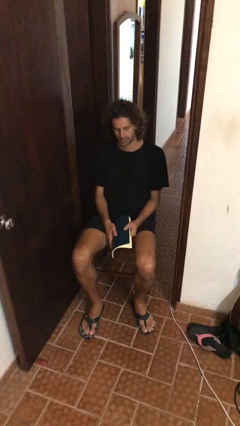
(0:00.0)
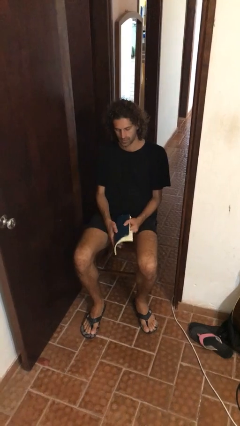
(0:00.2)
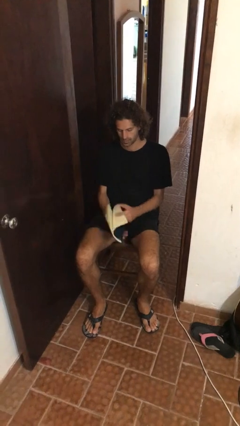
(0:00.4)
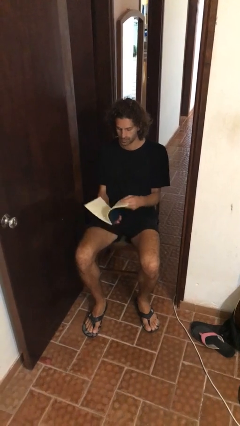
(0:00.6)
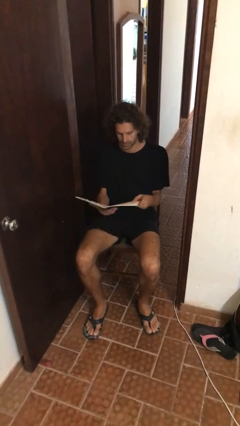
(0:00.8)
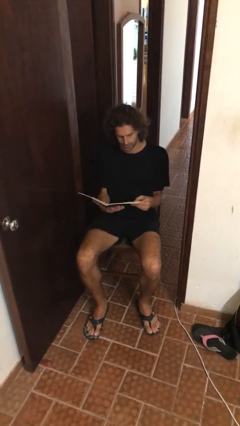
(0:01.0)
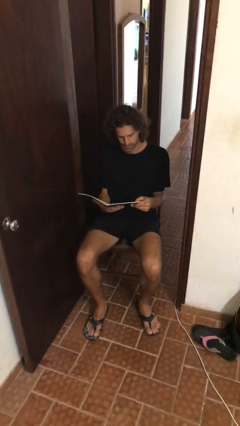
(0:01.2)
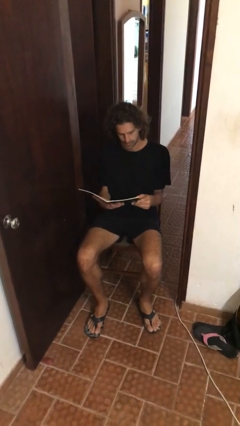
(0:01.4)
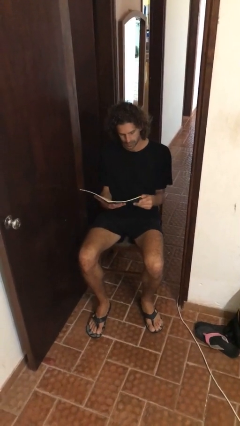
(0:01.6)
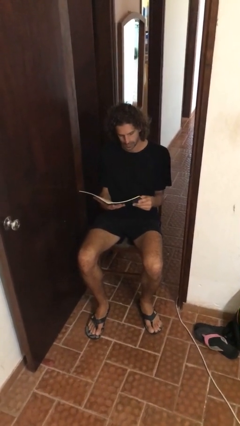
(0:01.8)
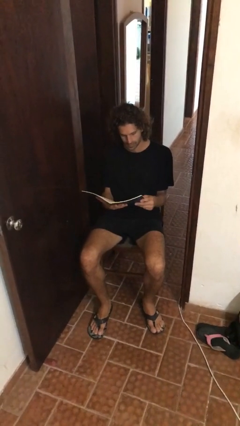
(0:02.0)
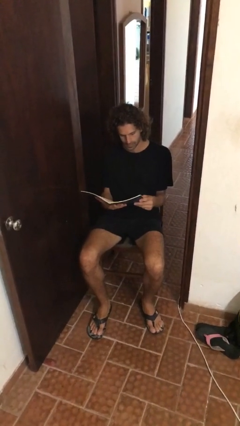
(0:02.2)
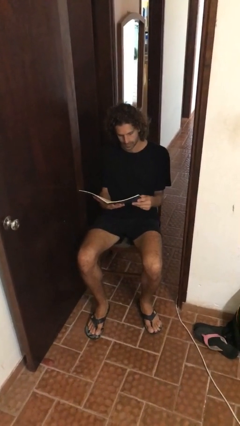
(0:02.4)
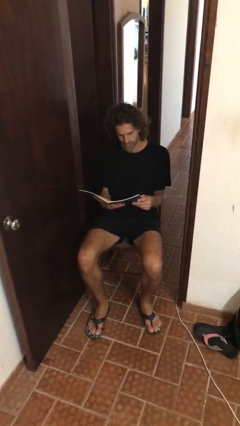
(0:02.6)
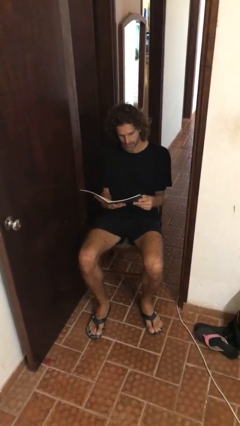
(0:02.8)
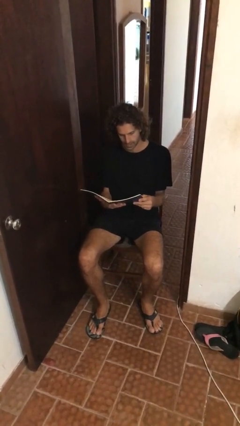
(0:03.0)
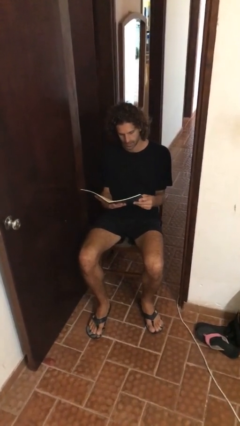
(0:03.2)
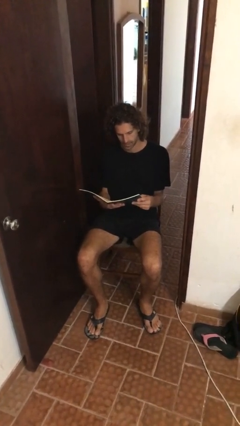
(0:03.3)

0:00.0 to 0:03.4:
person reads document

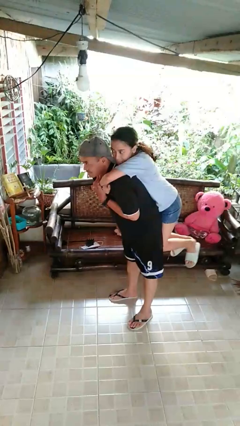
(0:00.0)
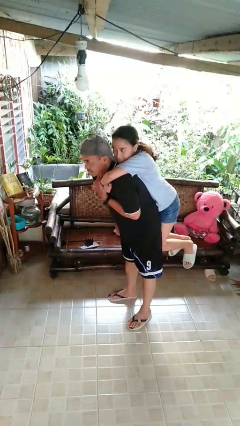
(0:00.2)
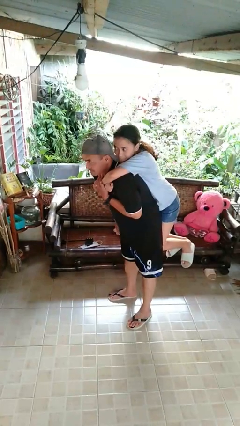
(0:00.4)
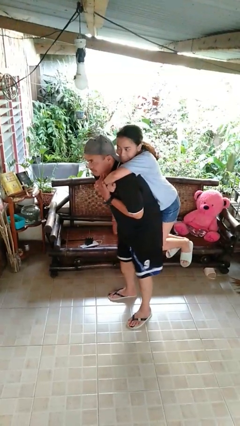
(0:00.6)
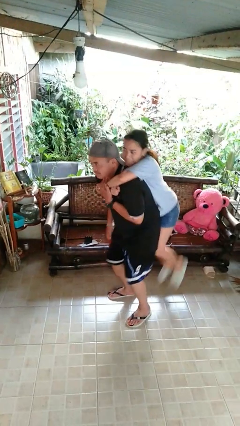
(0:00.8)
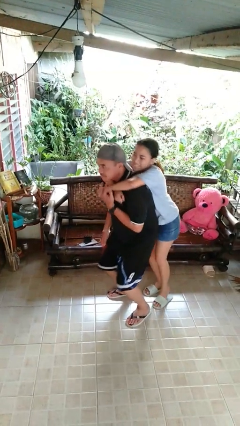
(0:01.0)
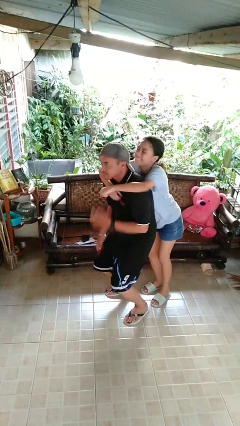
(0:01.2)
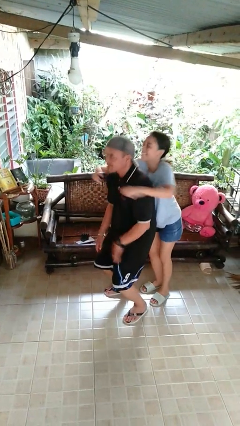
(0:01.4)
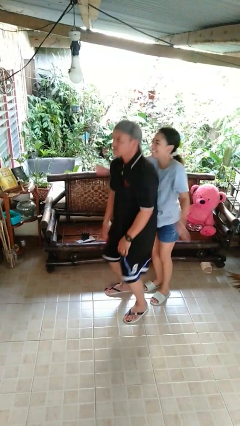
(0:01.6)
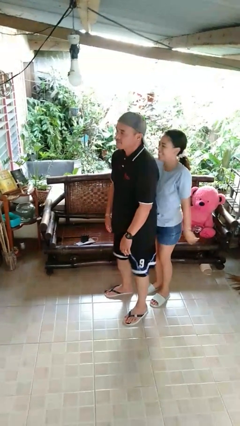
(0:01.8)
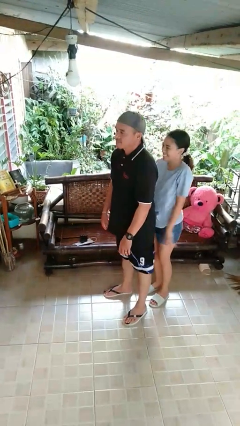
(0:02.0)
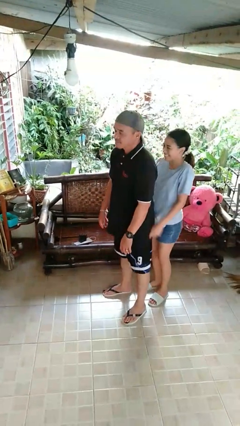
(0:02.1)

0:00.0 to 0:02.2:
person puts down person

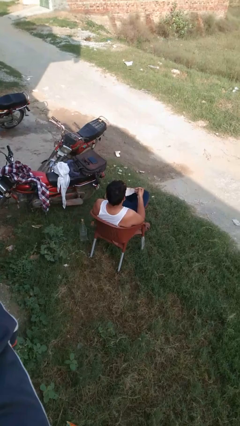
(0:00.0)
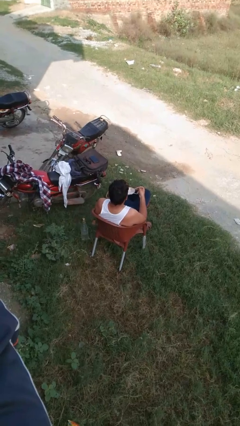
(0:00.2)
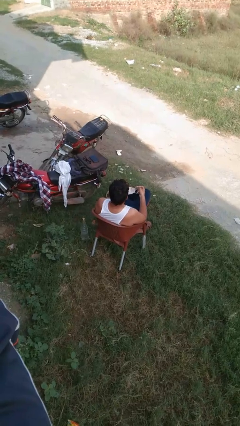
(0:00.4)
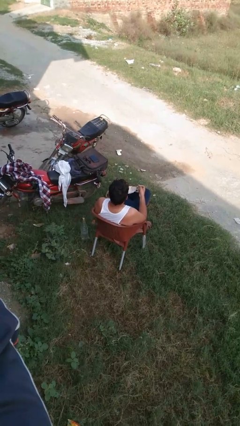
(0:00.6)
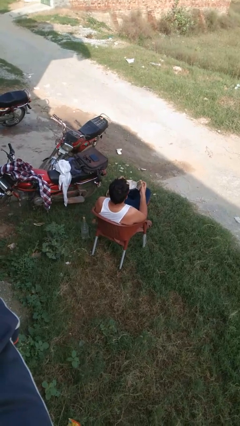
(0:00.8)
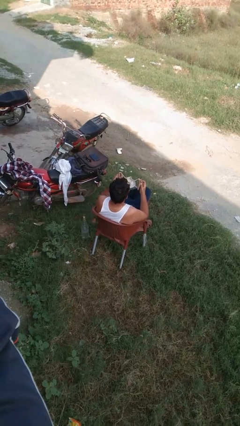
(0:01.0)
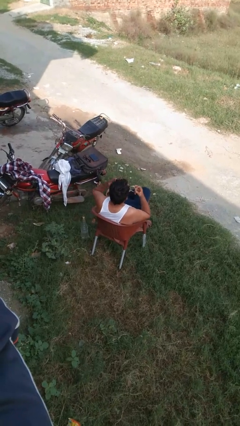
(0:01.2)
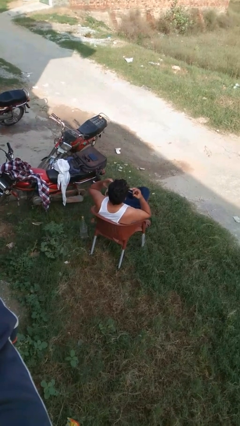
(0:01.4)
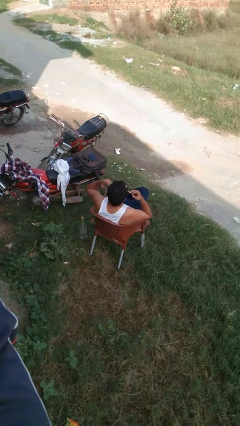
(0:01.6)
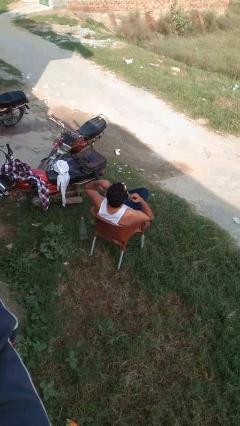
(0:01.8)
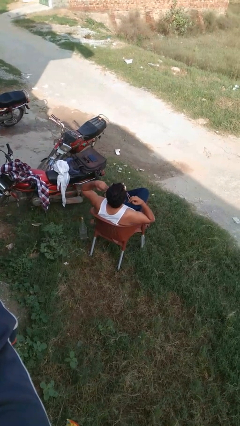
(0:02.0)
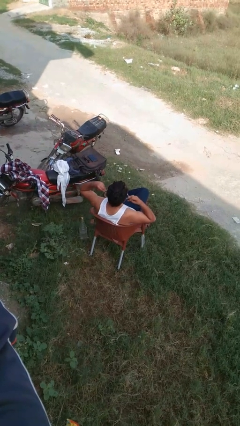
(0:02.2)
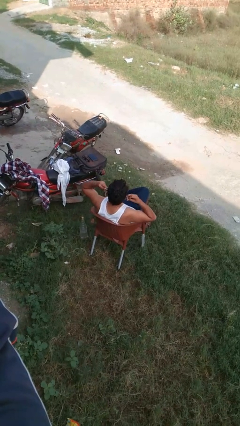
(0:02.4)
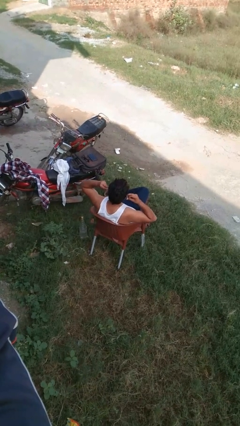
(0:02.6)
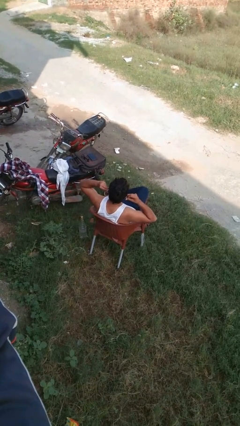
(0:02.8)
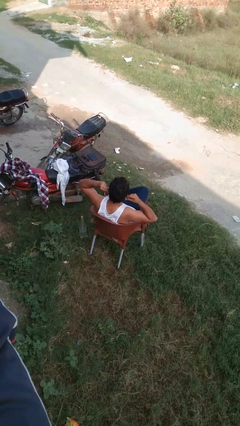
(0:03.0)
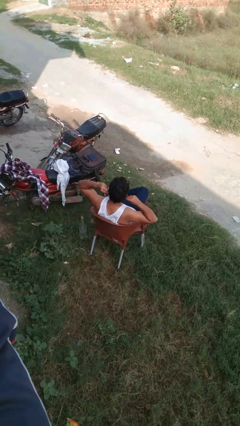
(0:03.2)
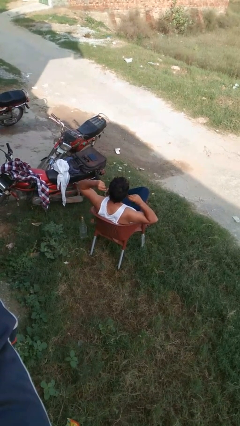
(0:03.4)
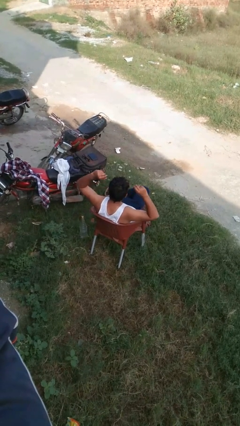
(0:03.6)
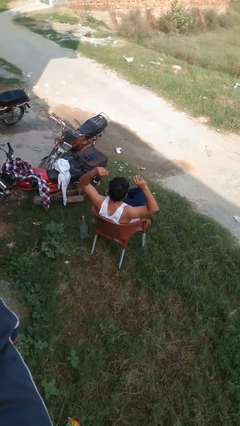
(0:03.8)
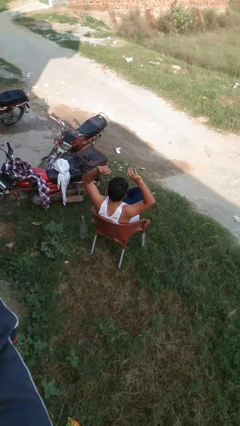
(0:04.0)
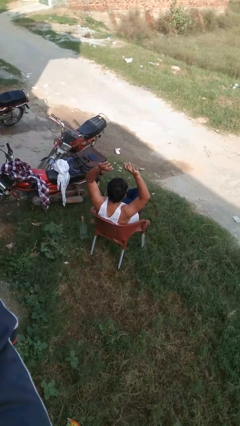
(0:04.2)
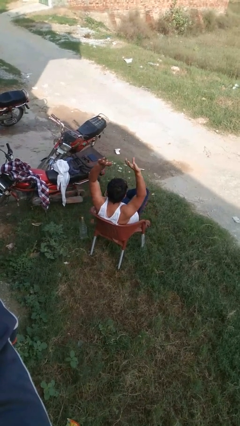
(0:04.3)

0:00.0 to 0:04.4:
person puts on facemask

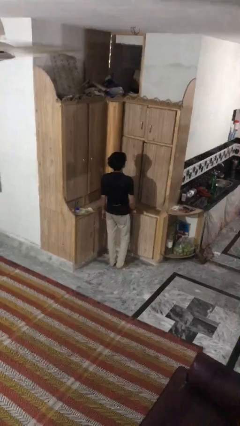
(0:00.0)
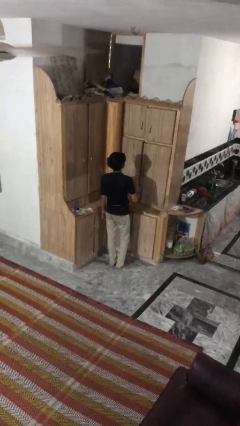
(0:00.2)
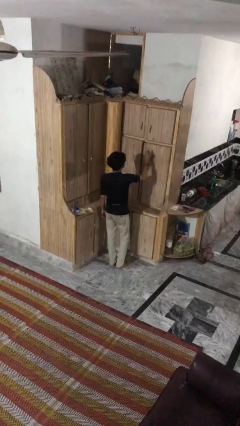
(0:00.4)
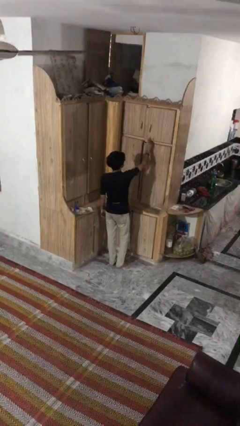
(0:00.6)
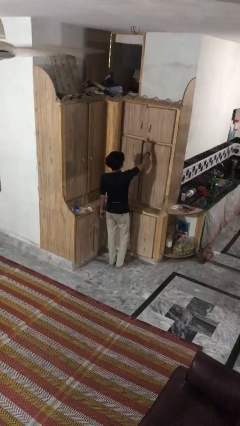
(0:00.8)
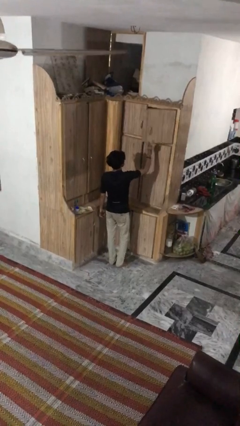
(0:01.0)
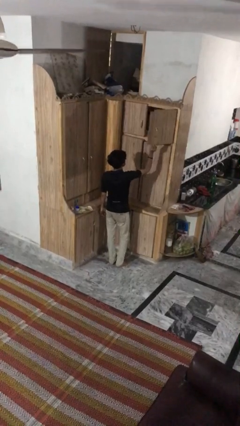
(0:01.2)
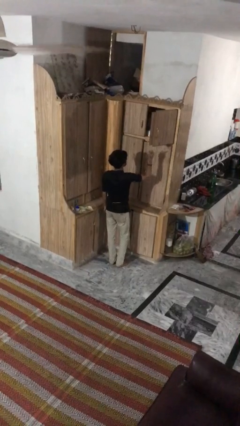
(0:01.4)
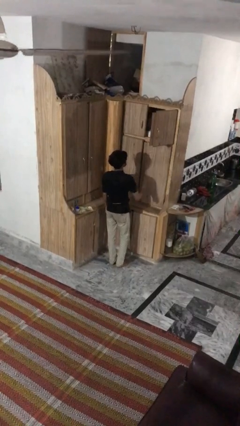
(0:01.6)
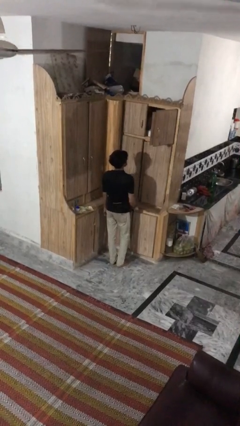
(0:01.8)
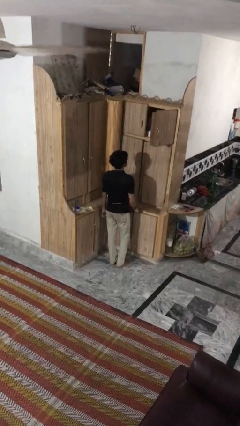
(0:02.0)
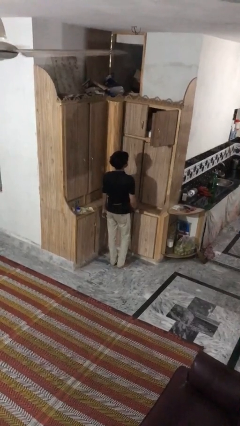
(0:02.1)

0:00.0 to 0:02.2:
person opens cabinet

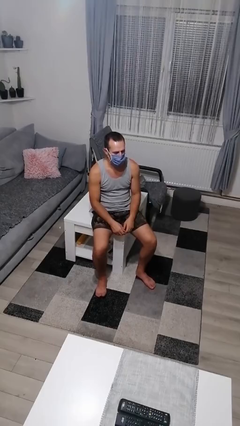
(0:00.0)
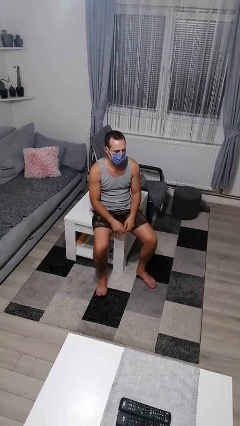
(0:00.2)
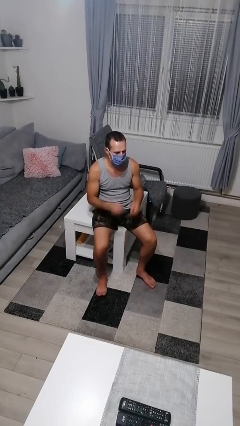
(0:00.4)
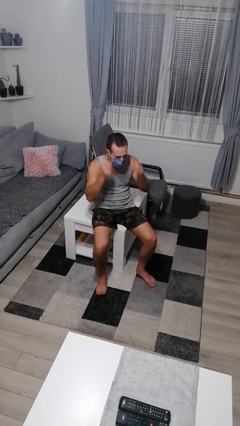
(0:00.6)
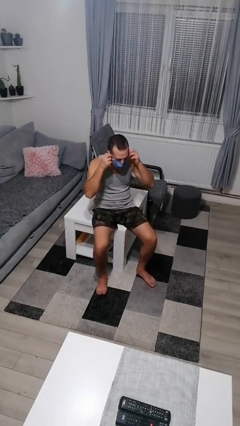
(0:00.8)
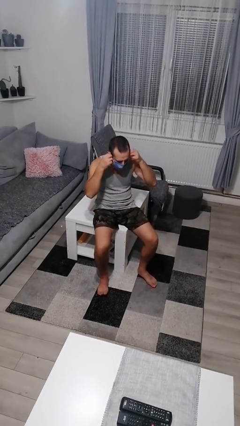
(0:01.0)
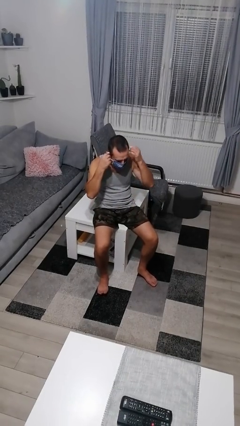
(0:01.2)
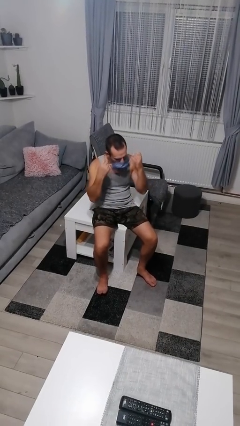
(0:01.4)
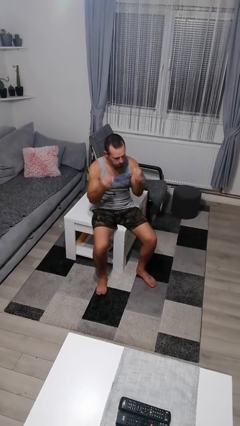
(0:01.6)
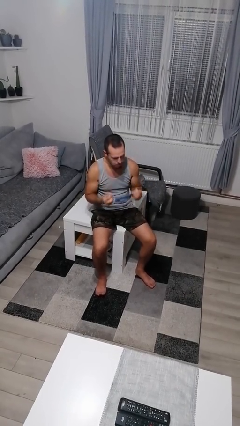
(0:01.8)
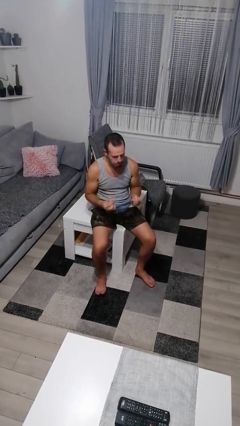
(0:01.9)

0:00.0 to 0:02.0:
person takes off facemask

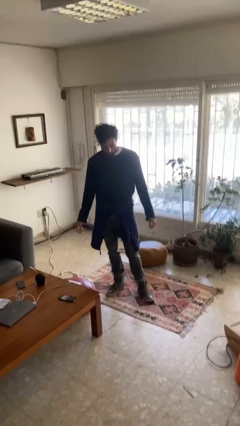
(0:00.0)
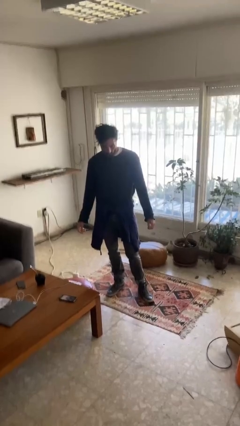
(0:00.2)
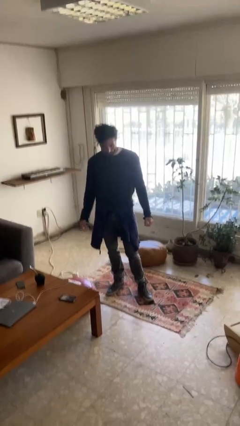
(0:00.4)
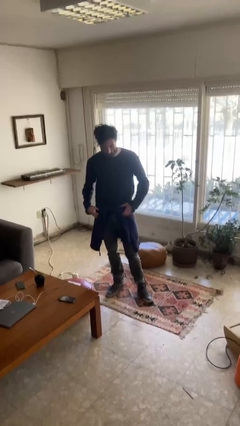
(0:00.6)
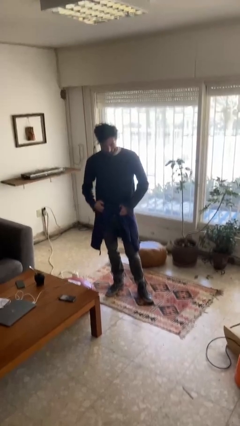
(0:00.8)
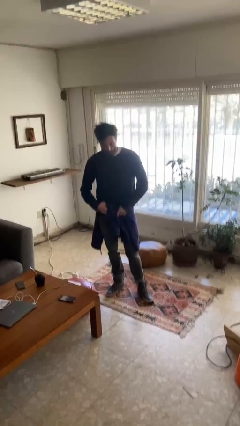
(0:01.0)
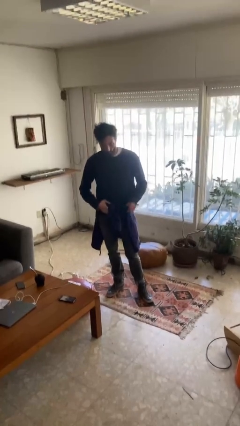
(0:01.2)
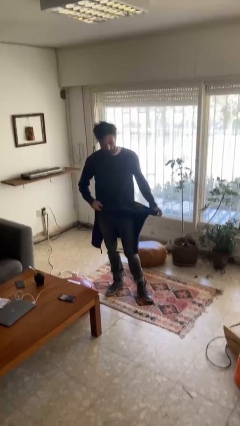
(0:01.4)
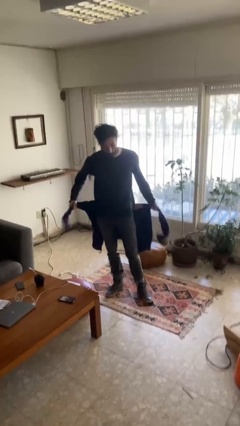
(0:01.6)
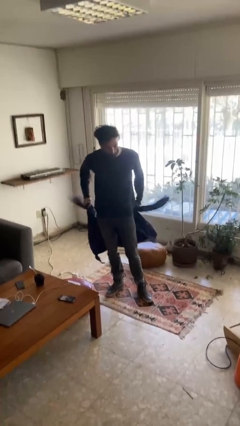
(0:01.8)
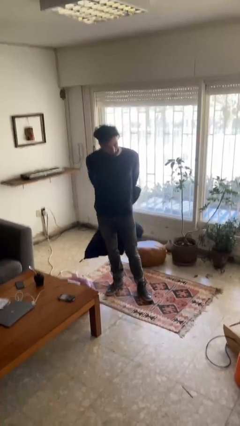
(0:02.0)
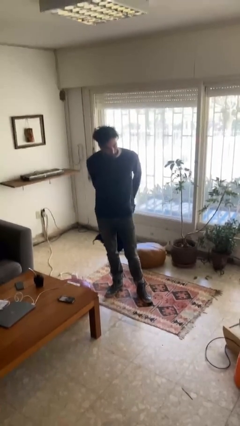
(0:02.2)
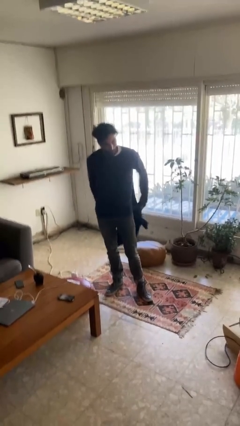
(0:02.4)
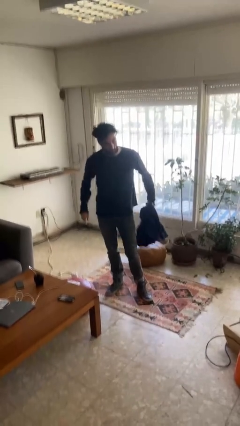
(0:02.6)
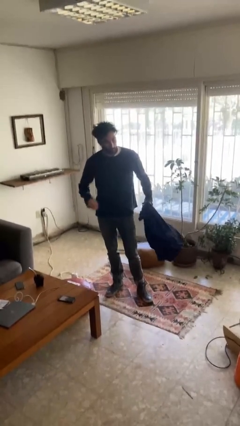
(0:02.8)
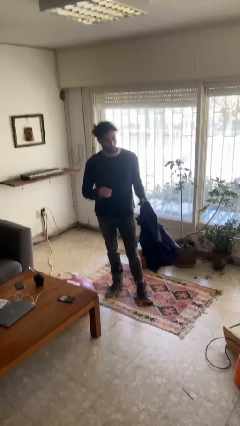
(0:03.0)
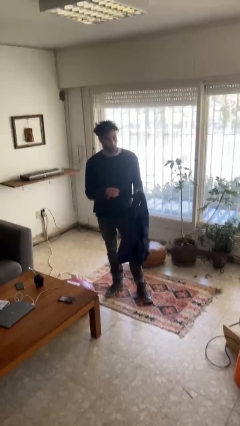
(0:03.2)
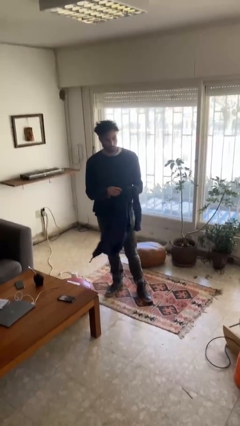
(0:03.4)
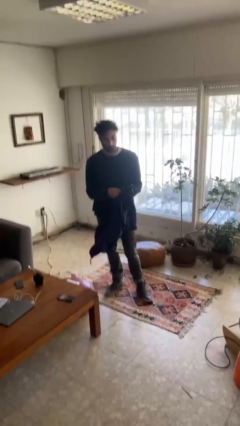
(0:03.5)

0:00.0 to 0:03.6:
person unties jacket around waist
